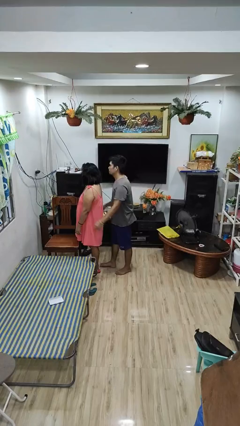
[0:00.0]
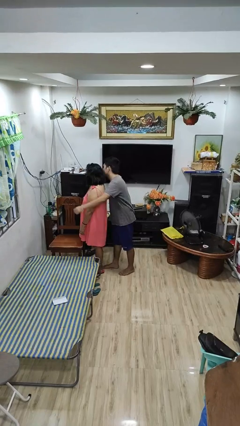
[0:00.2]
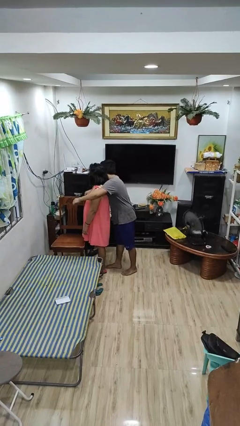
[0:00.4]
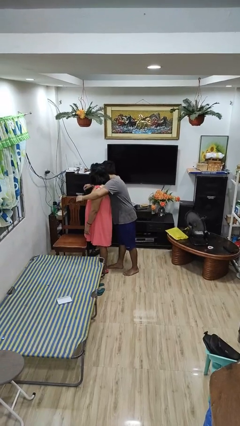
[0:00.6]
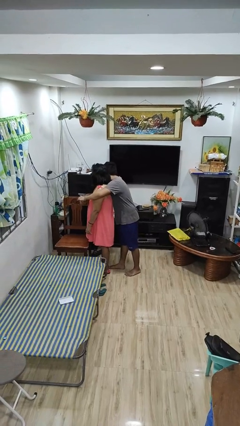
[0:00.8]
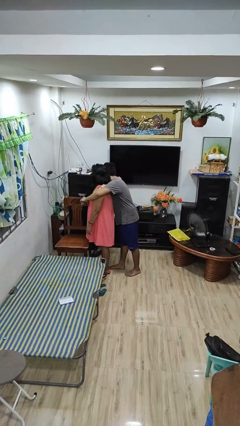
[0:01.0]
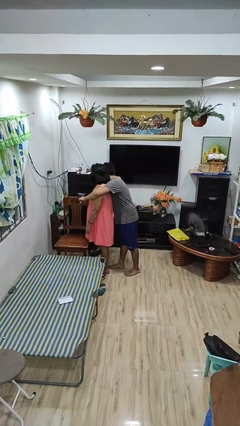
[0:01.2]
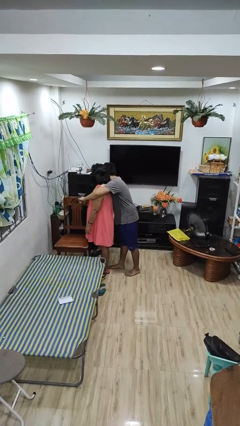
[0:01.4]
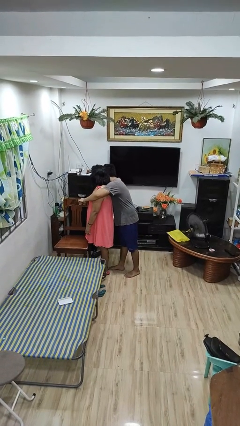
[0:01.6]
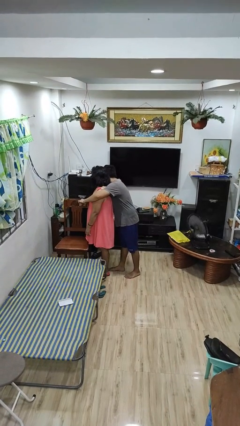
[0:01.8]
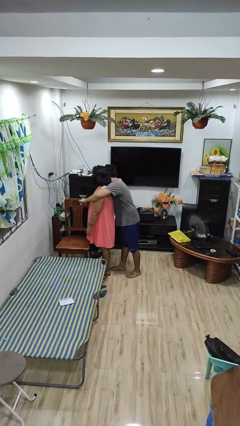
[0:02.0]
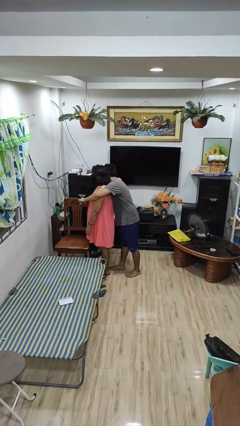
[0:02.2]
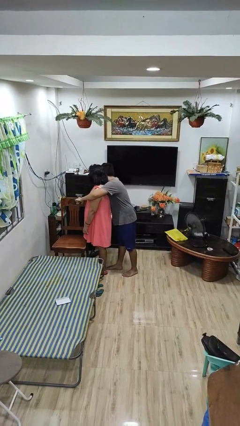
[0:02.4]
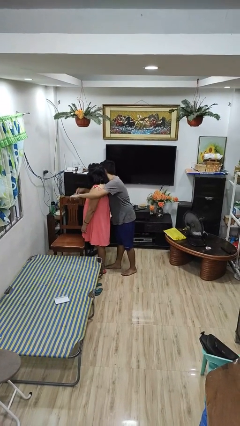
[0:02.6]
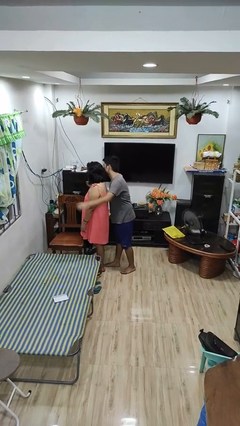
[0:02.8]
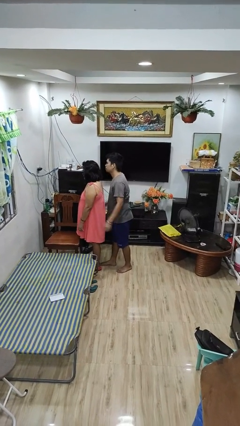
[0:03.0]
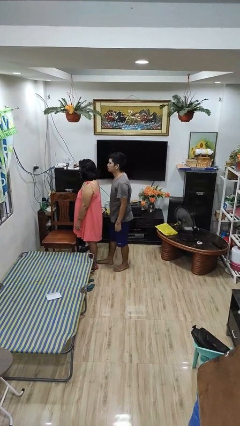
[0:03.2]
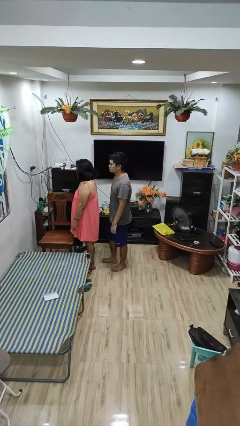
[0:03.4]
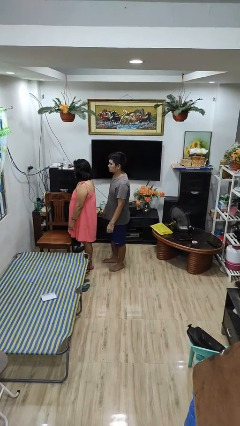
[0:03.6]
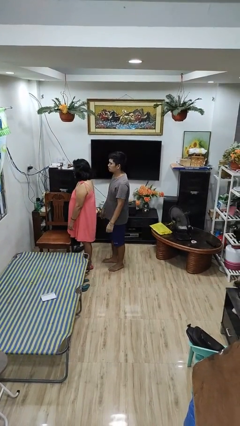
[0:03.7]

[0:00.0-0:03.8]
person hugs person from behind

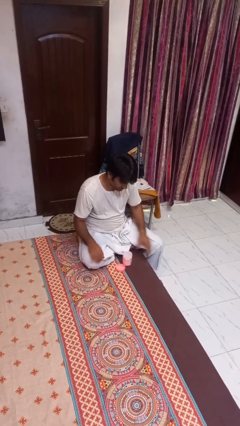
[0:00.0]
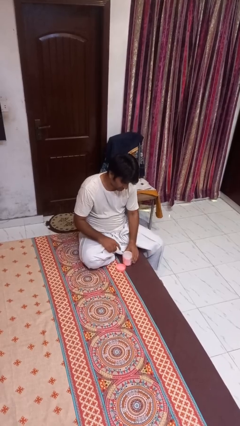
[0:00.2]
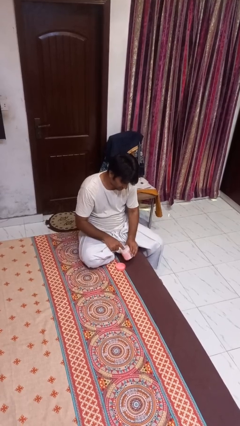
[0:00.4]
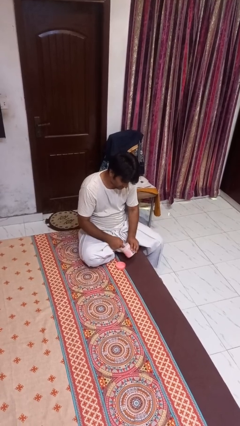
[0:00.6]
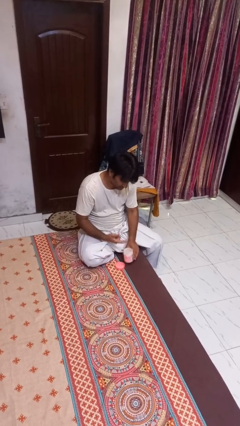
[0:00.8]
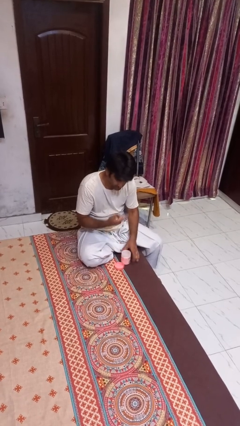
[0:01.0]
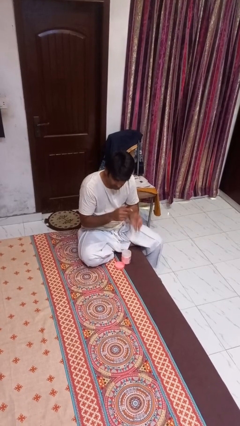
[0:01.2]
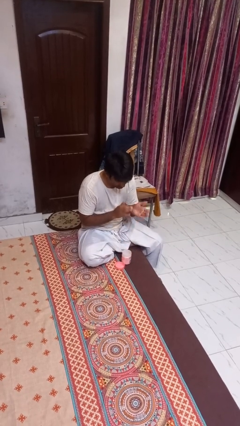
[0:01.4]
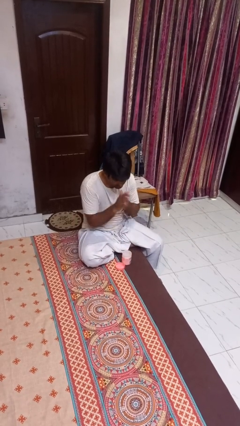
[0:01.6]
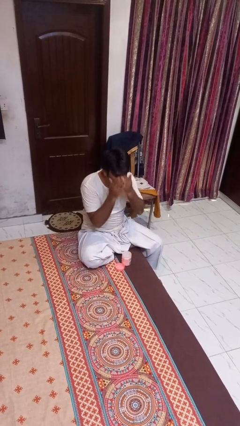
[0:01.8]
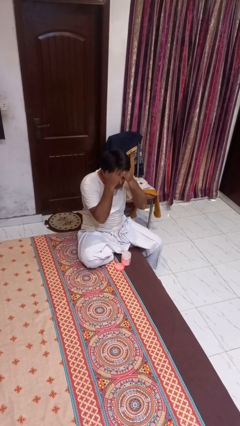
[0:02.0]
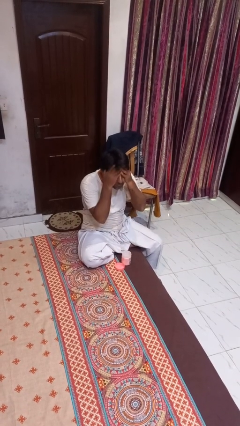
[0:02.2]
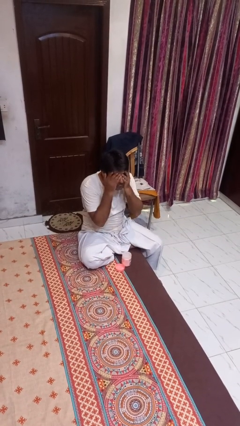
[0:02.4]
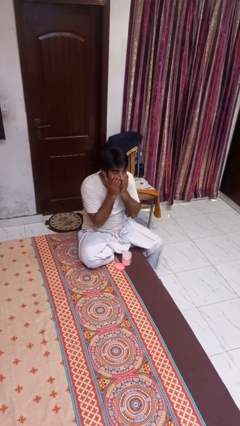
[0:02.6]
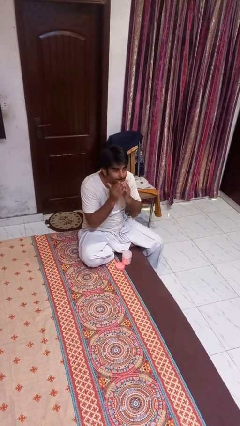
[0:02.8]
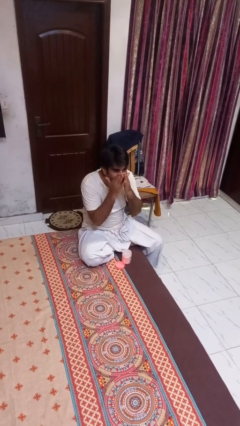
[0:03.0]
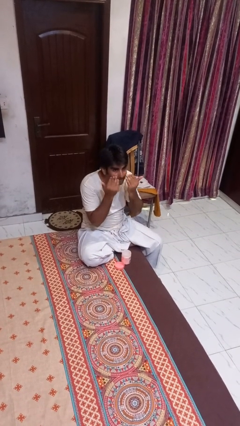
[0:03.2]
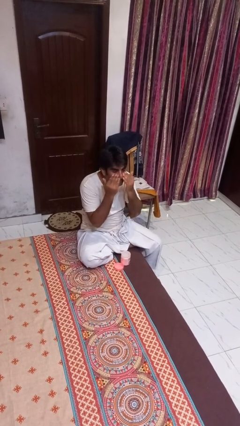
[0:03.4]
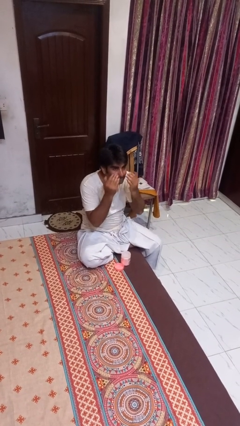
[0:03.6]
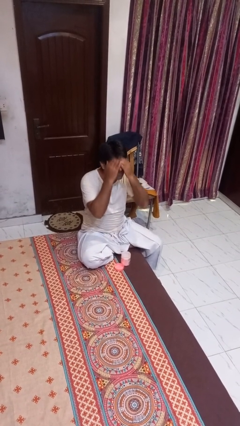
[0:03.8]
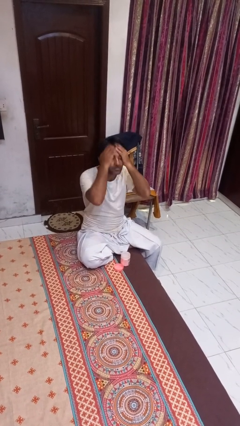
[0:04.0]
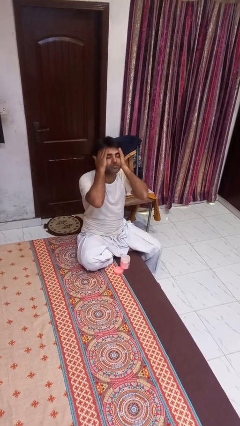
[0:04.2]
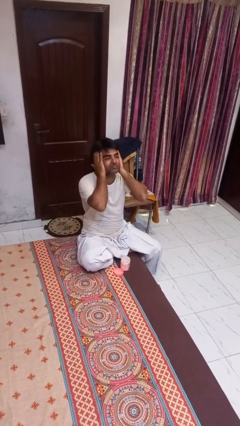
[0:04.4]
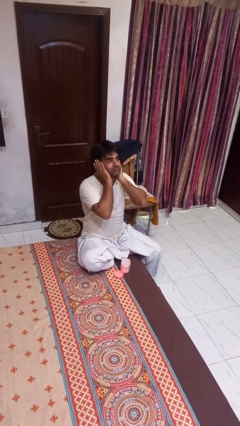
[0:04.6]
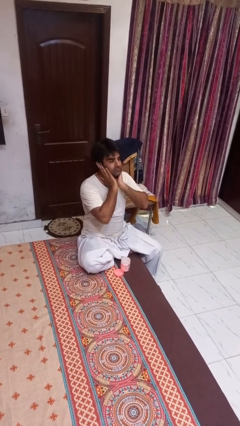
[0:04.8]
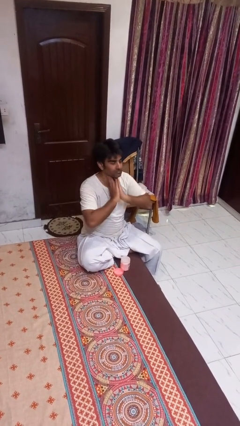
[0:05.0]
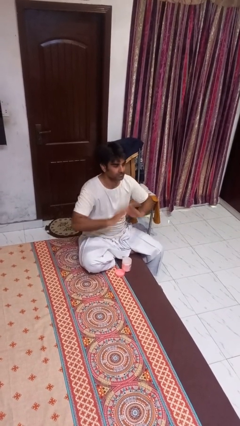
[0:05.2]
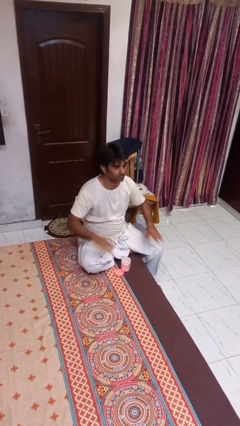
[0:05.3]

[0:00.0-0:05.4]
person applies facial moisturizer

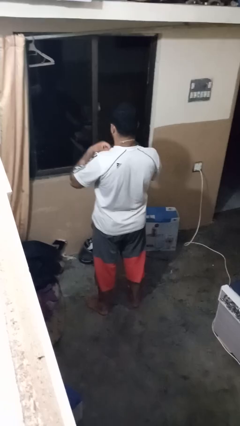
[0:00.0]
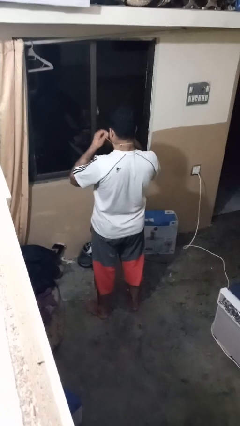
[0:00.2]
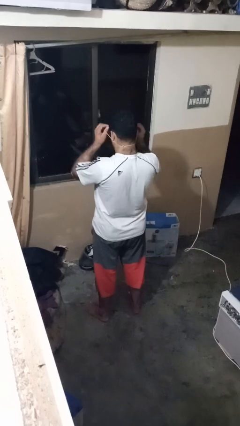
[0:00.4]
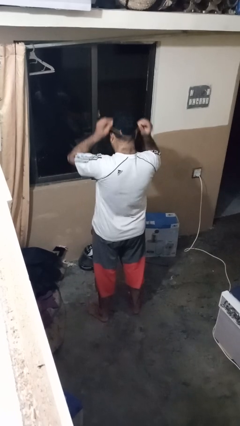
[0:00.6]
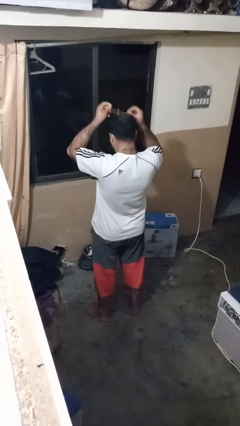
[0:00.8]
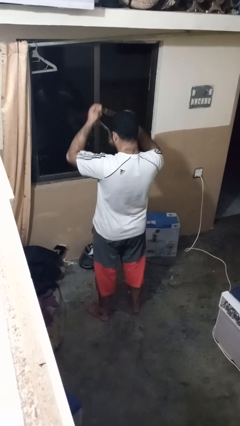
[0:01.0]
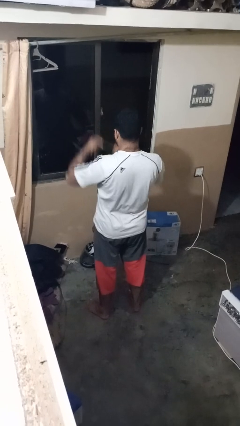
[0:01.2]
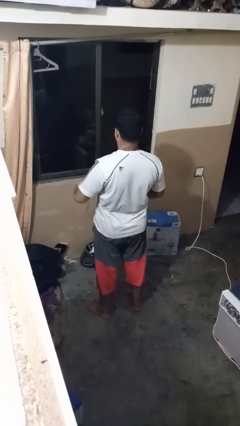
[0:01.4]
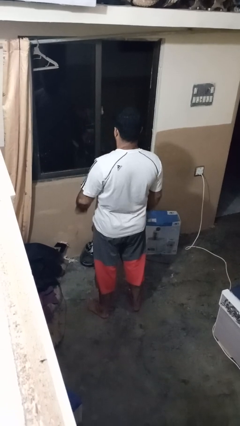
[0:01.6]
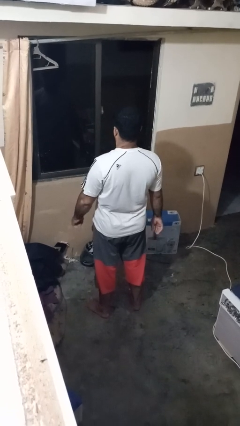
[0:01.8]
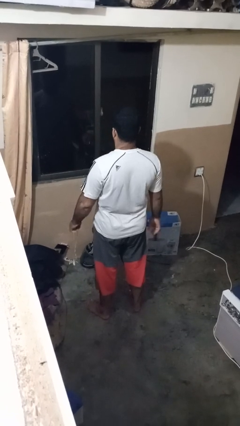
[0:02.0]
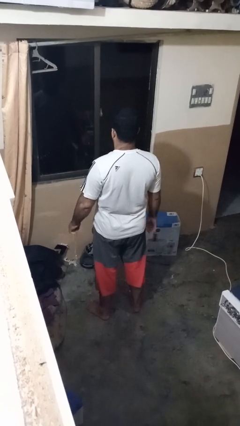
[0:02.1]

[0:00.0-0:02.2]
person takes off necklace

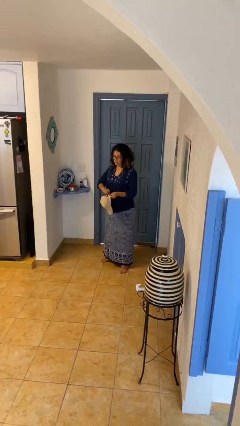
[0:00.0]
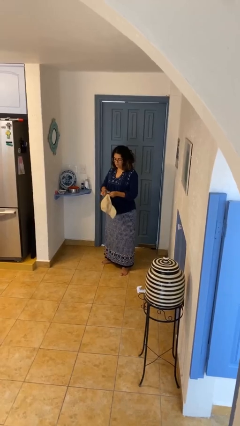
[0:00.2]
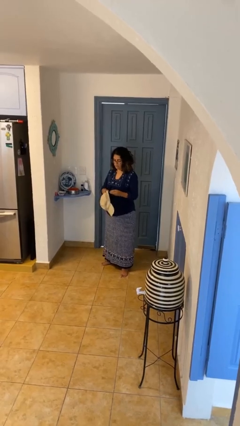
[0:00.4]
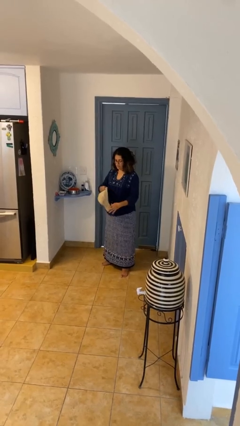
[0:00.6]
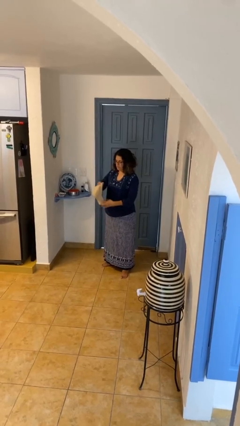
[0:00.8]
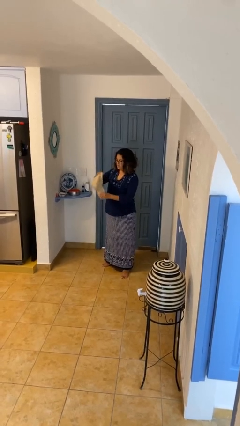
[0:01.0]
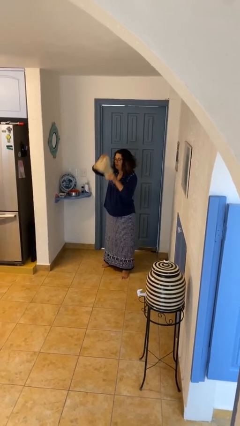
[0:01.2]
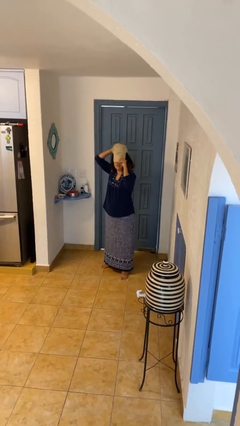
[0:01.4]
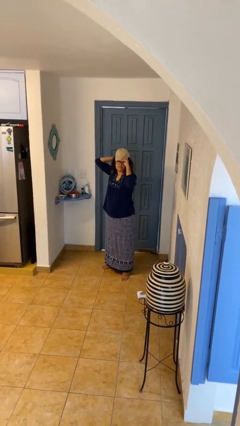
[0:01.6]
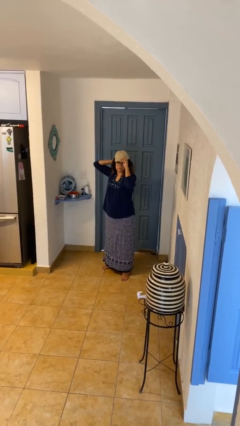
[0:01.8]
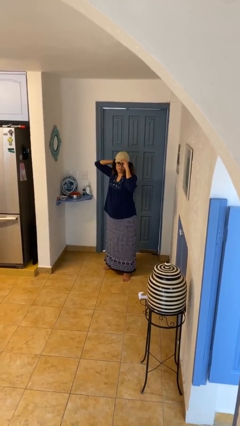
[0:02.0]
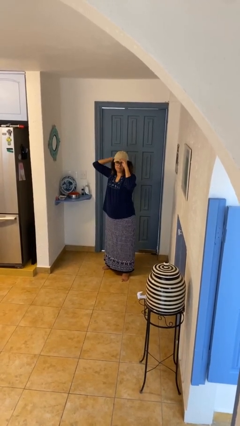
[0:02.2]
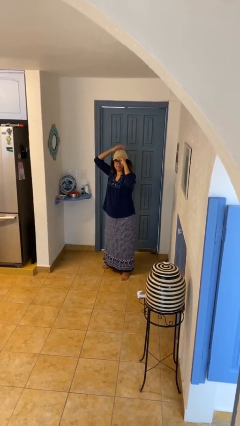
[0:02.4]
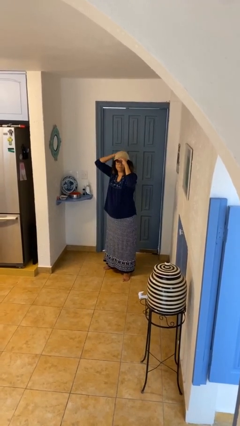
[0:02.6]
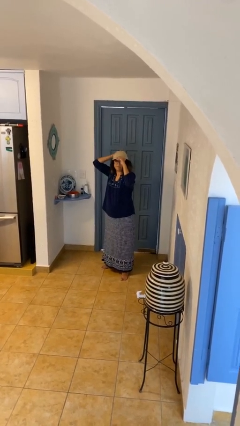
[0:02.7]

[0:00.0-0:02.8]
person puts on hat

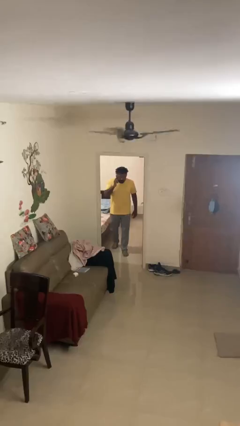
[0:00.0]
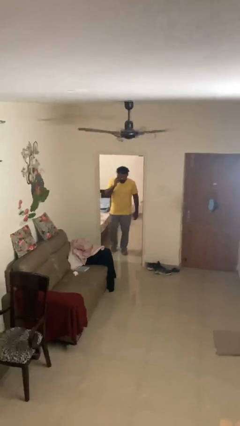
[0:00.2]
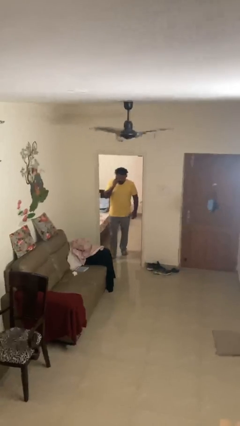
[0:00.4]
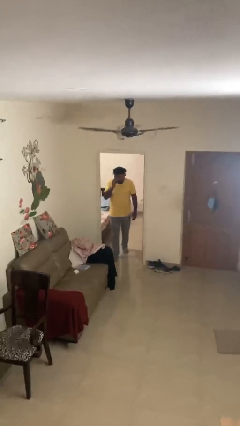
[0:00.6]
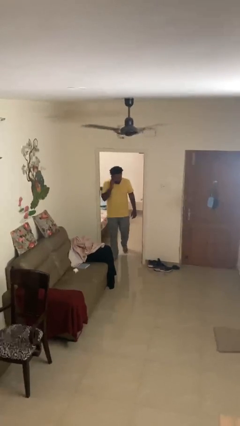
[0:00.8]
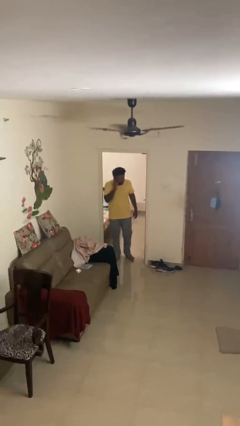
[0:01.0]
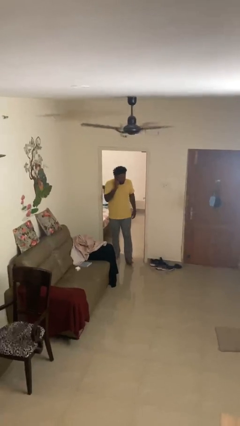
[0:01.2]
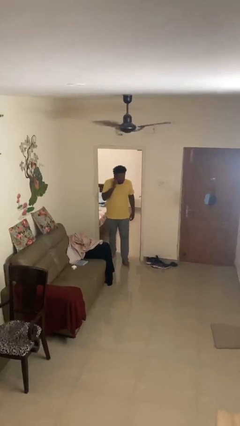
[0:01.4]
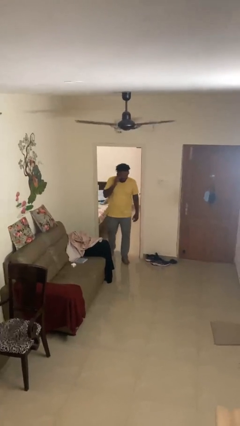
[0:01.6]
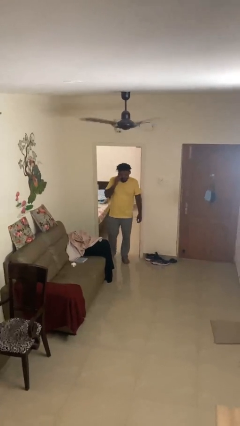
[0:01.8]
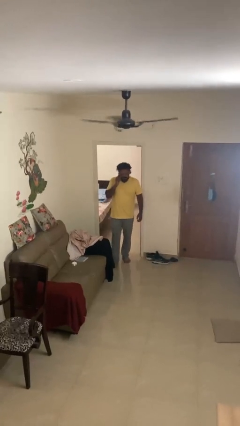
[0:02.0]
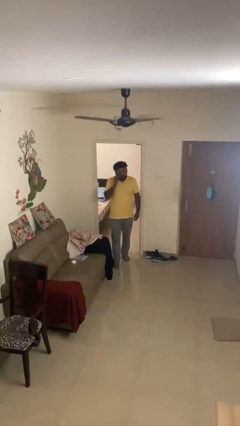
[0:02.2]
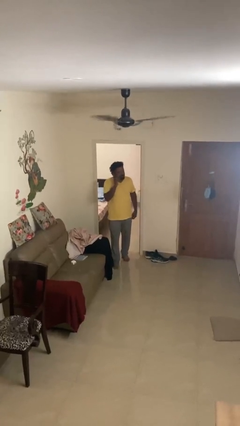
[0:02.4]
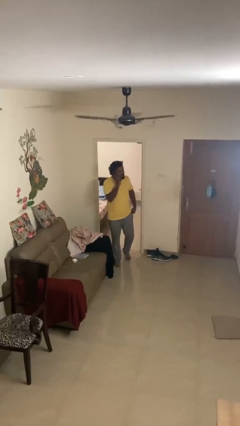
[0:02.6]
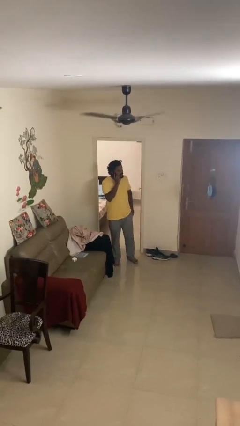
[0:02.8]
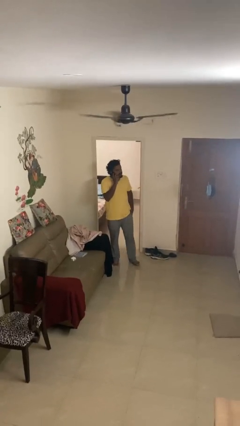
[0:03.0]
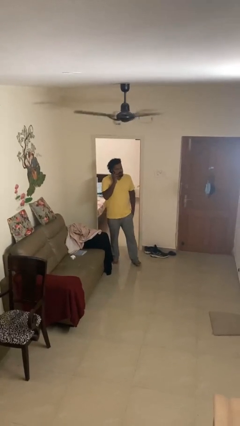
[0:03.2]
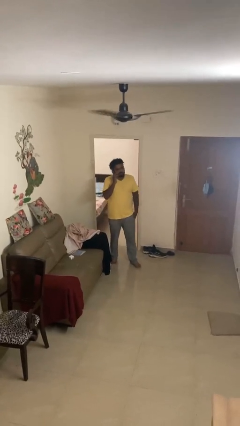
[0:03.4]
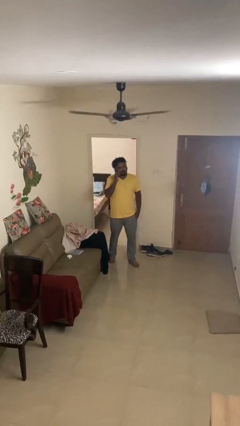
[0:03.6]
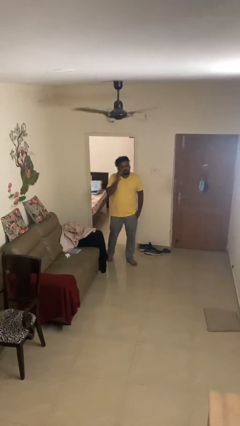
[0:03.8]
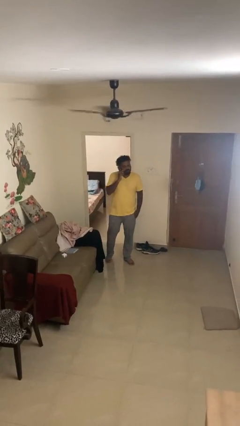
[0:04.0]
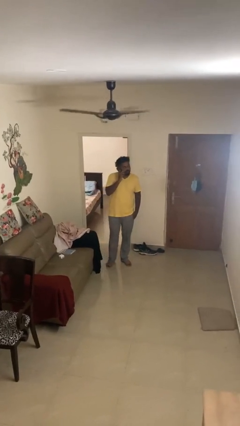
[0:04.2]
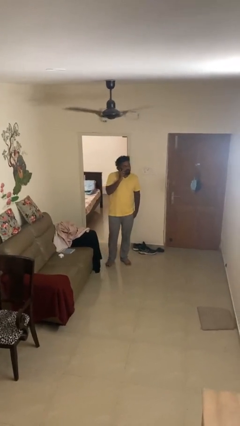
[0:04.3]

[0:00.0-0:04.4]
person enters scene through structure
